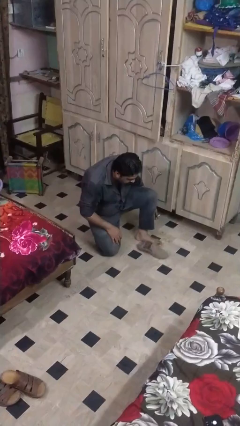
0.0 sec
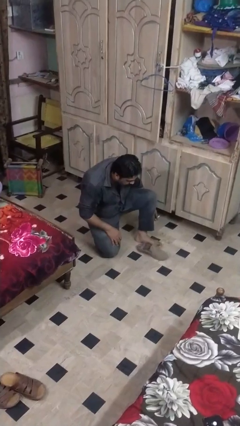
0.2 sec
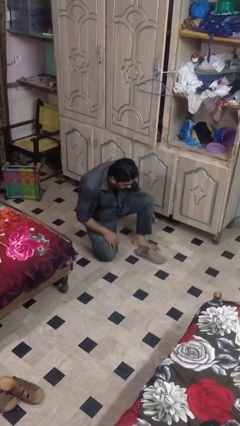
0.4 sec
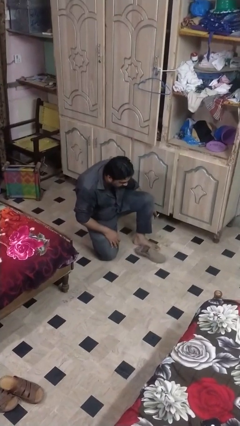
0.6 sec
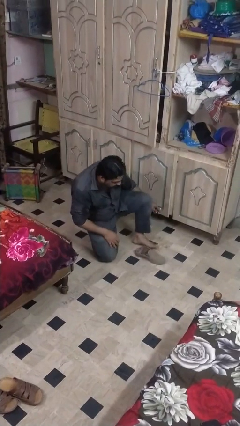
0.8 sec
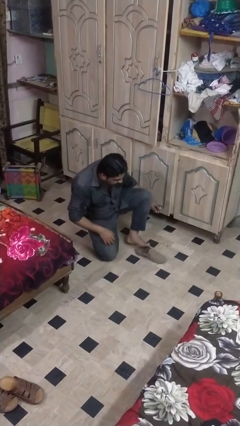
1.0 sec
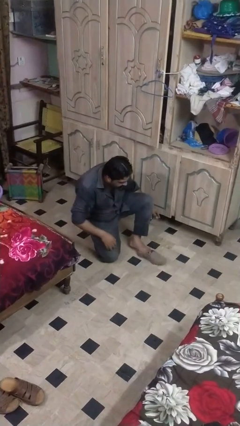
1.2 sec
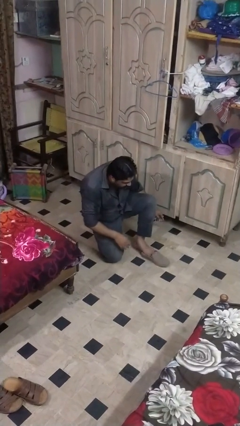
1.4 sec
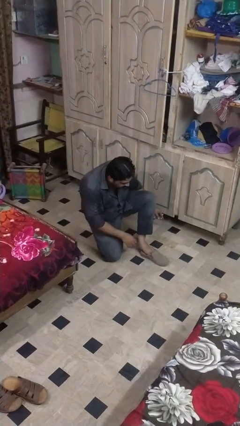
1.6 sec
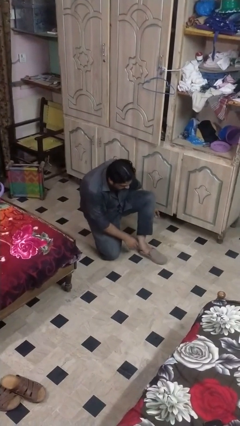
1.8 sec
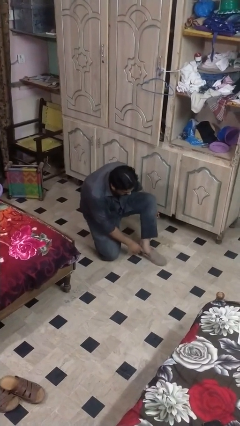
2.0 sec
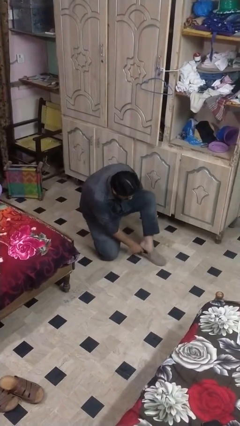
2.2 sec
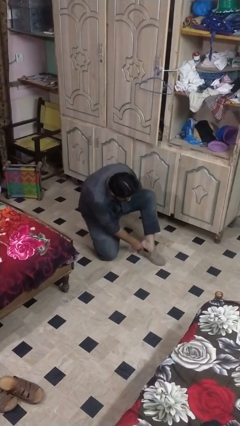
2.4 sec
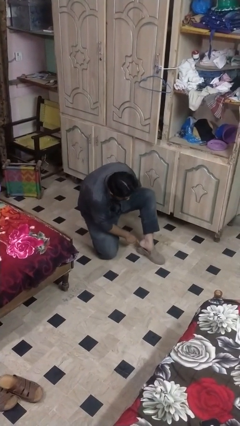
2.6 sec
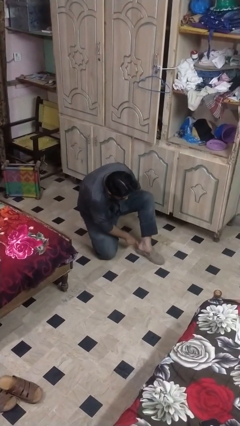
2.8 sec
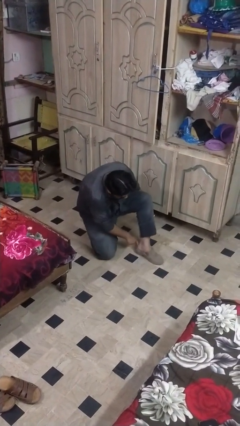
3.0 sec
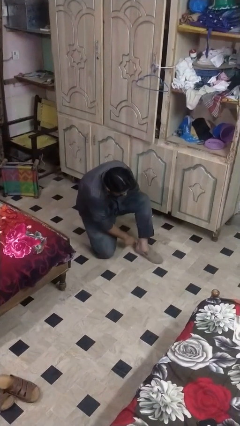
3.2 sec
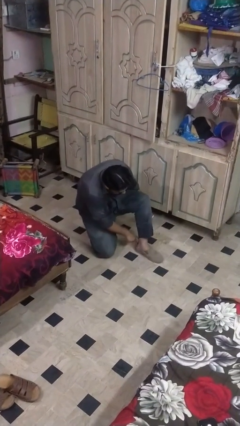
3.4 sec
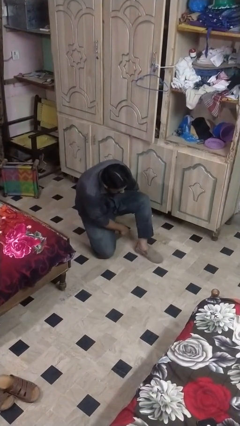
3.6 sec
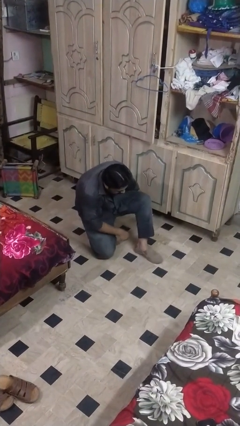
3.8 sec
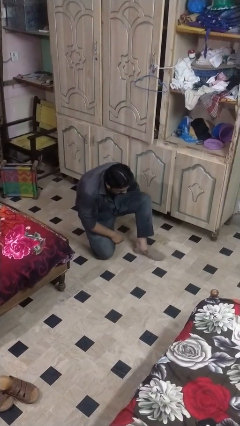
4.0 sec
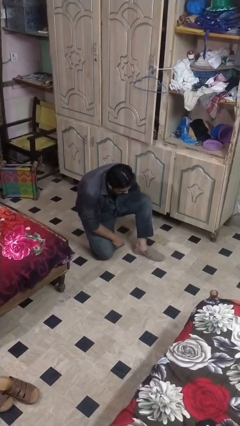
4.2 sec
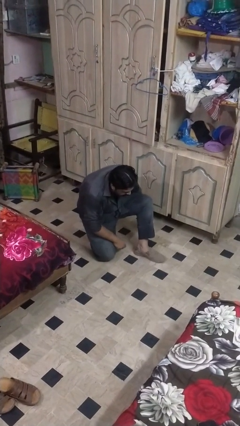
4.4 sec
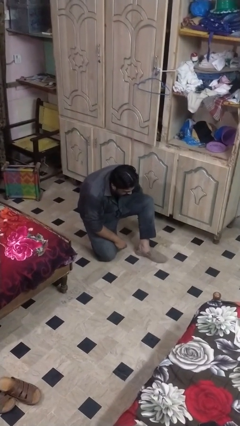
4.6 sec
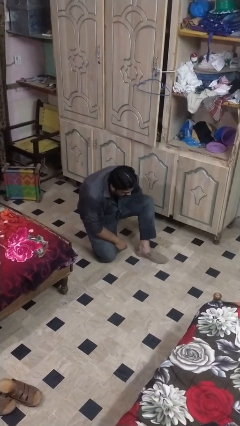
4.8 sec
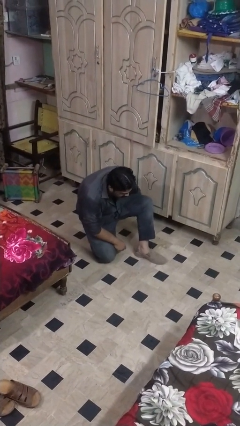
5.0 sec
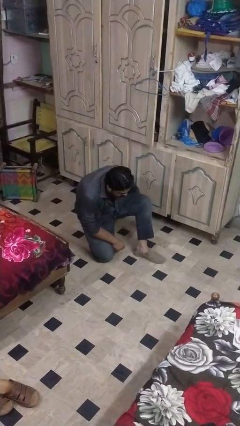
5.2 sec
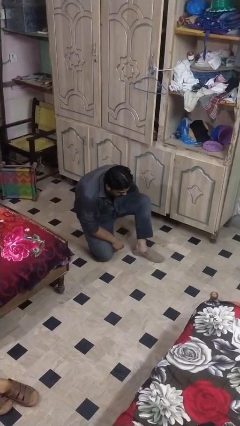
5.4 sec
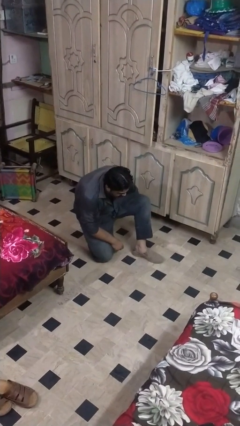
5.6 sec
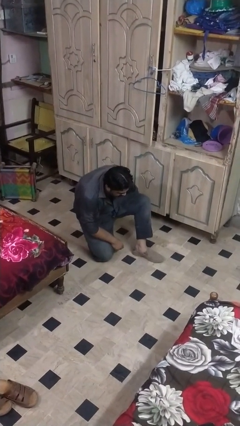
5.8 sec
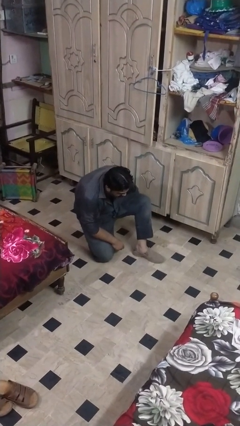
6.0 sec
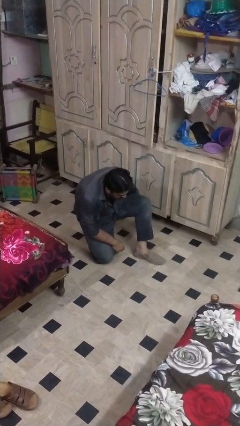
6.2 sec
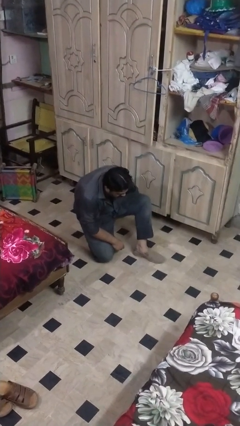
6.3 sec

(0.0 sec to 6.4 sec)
person puts on boots

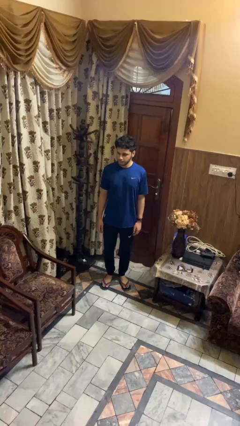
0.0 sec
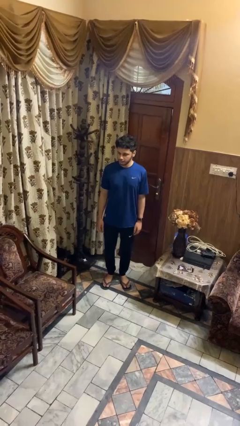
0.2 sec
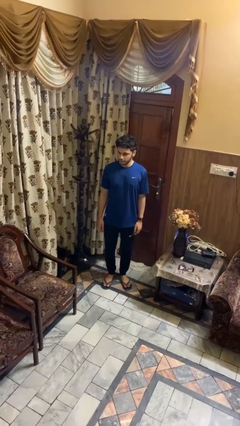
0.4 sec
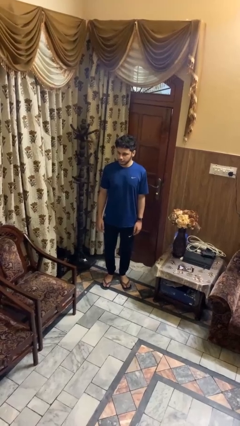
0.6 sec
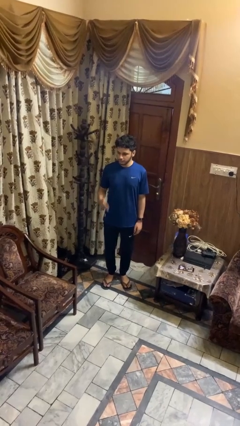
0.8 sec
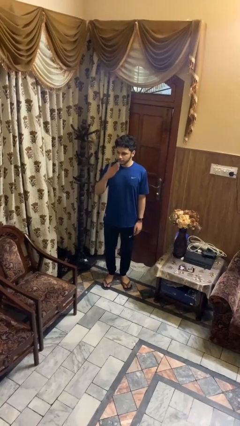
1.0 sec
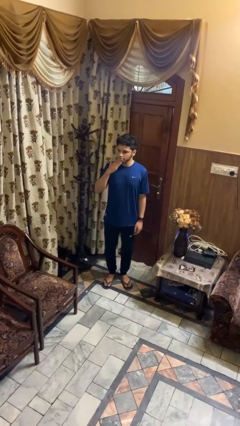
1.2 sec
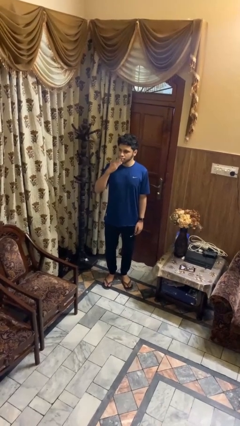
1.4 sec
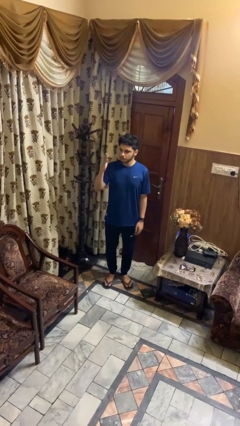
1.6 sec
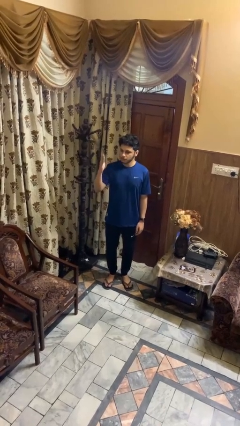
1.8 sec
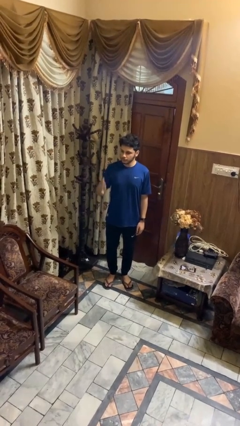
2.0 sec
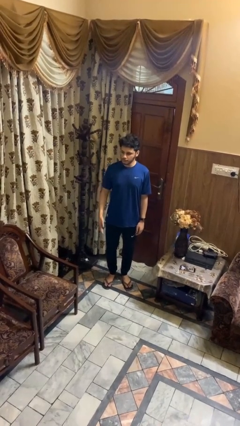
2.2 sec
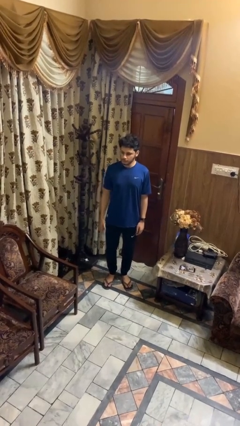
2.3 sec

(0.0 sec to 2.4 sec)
person gestures blow kiss

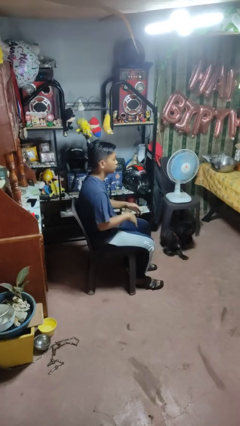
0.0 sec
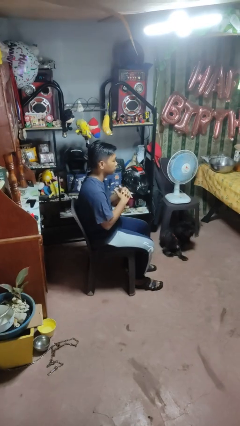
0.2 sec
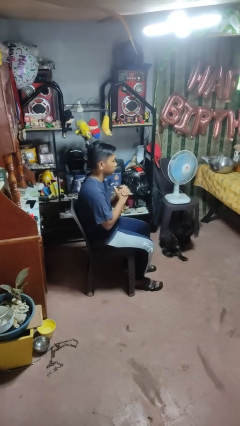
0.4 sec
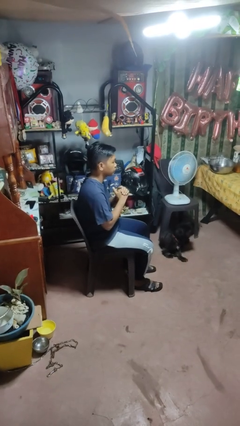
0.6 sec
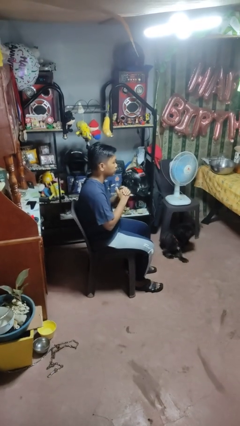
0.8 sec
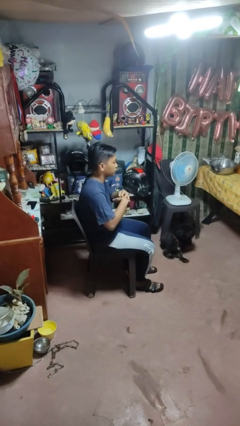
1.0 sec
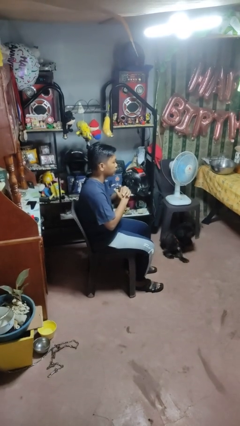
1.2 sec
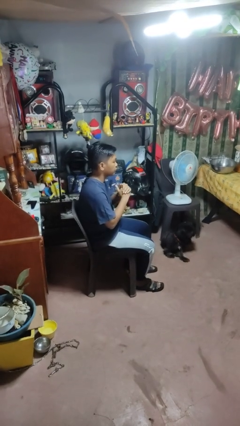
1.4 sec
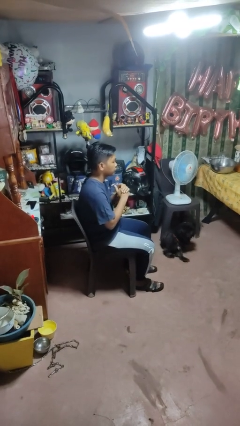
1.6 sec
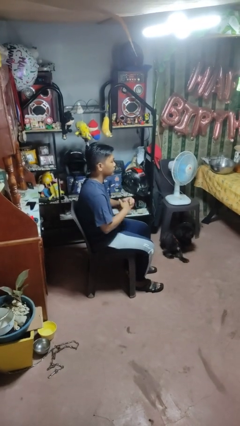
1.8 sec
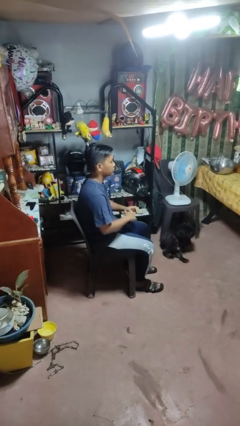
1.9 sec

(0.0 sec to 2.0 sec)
person cracks knuckles

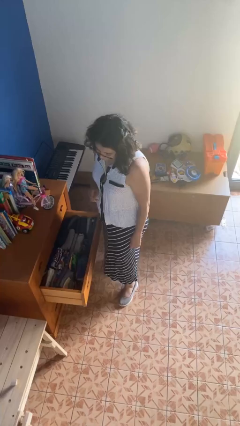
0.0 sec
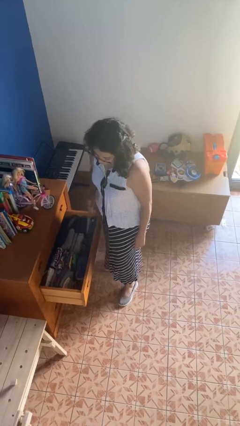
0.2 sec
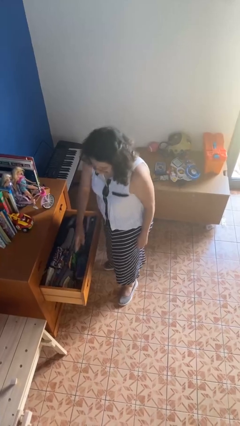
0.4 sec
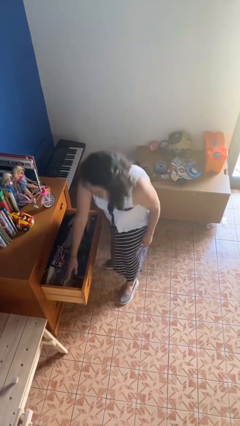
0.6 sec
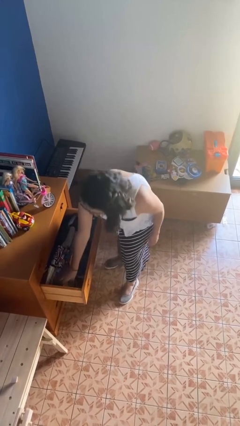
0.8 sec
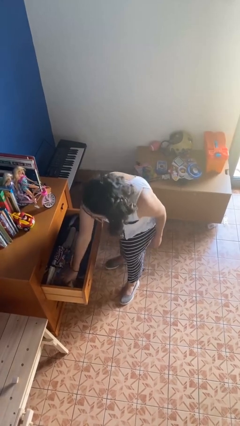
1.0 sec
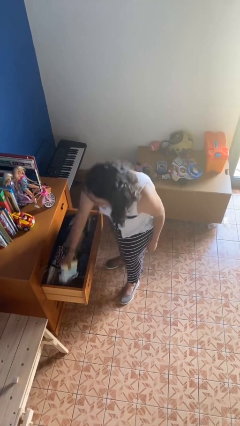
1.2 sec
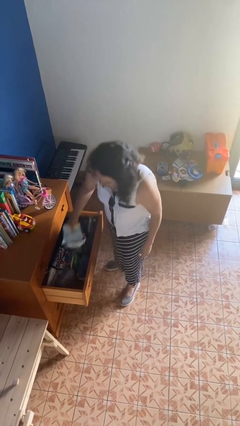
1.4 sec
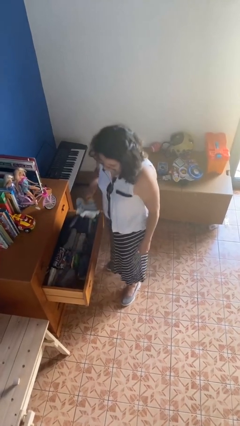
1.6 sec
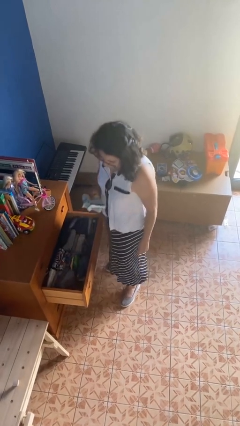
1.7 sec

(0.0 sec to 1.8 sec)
person takes clothes from dresser

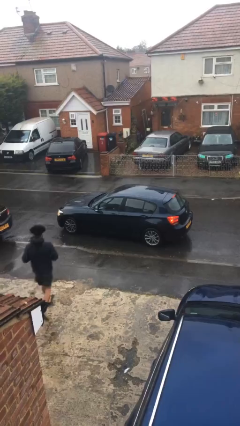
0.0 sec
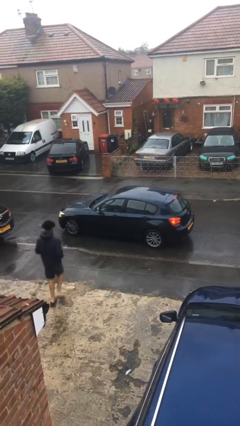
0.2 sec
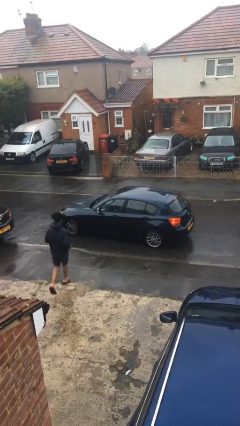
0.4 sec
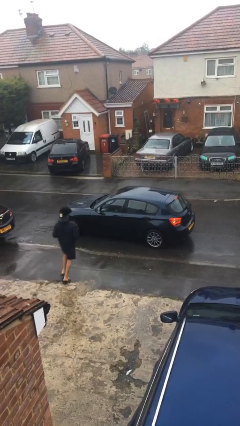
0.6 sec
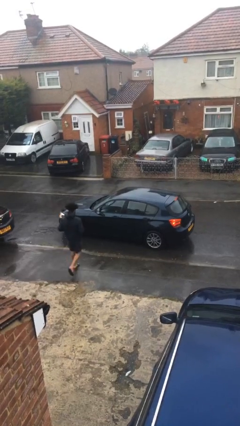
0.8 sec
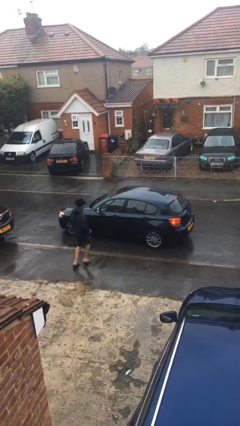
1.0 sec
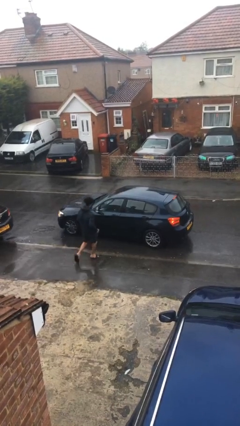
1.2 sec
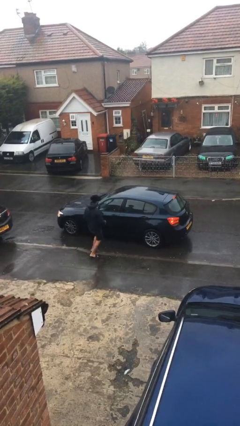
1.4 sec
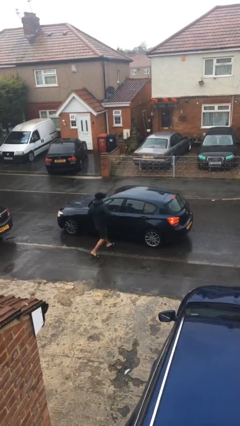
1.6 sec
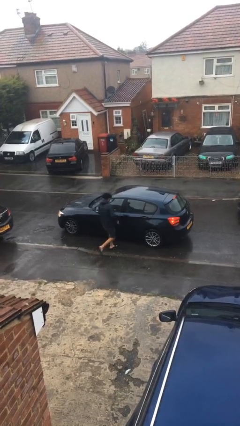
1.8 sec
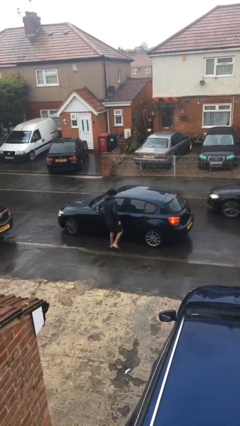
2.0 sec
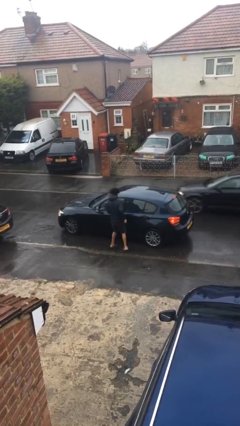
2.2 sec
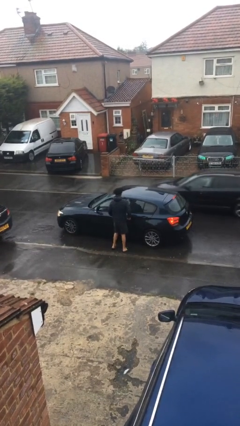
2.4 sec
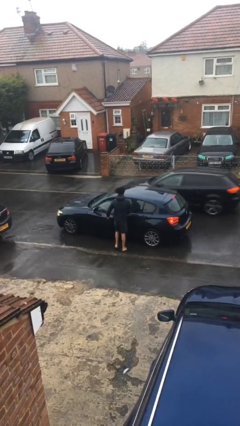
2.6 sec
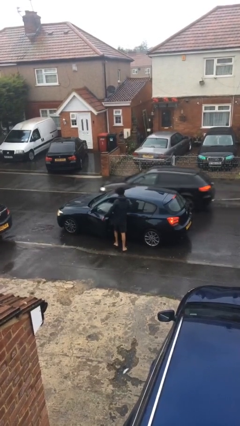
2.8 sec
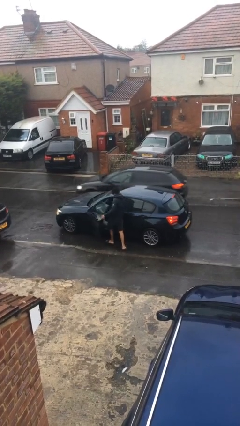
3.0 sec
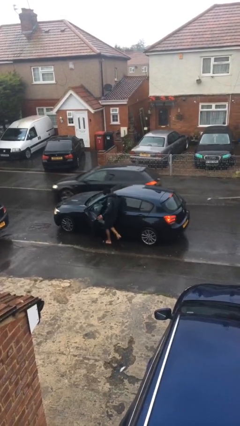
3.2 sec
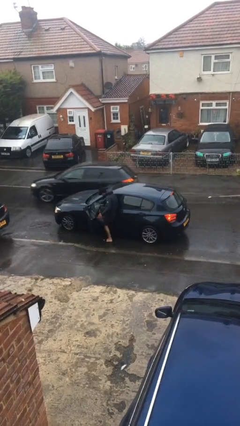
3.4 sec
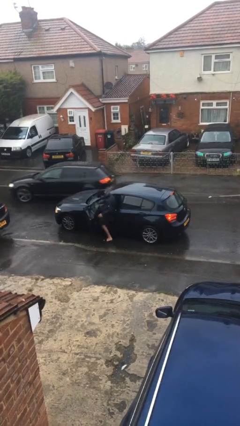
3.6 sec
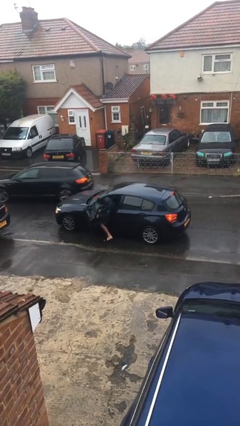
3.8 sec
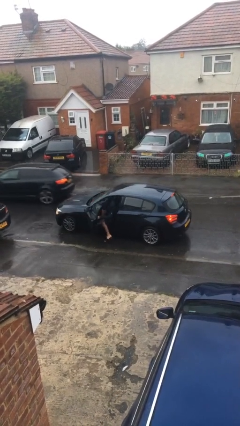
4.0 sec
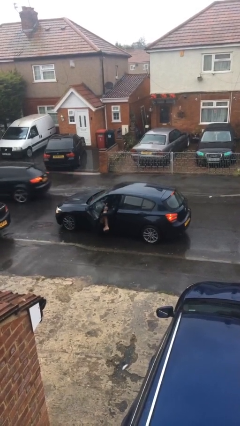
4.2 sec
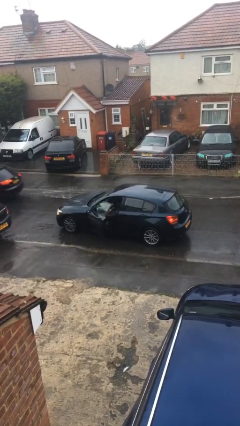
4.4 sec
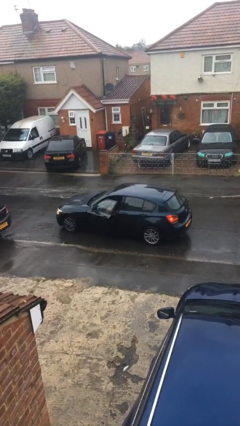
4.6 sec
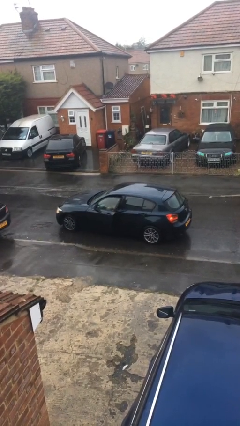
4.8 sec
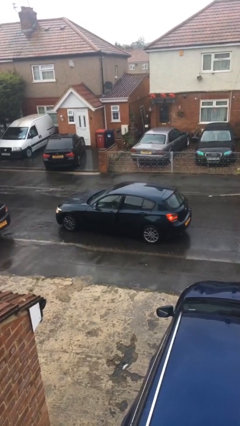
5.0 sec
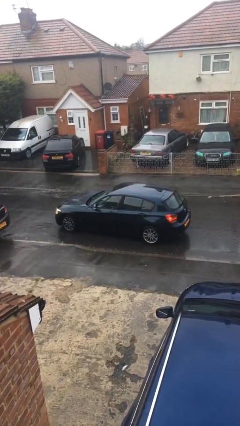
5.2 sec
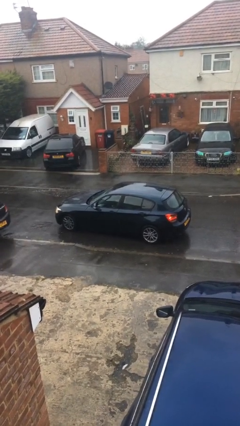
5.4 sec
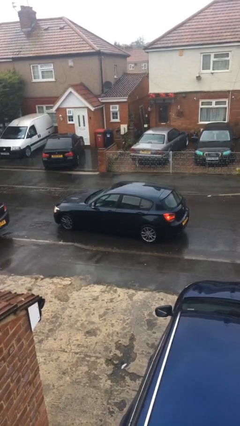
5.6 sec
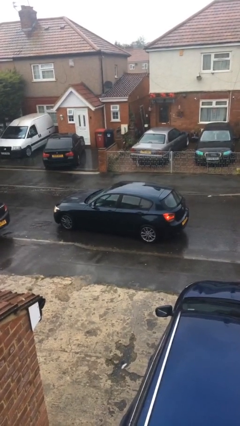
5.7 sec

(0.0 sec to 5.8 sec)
car picks up person
